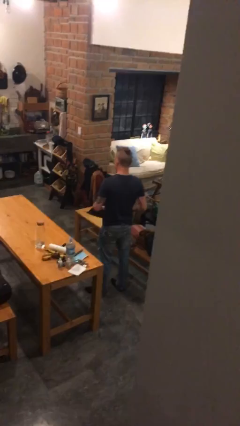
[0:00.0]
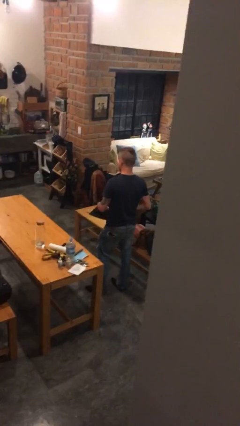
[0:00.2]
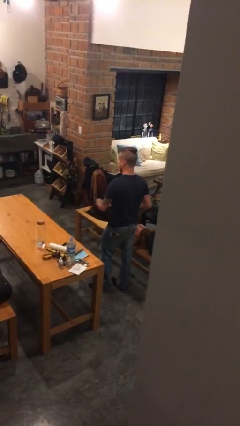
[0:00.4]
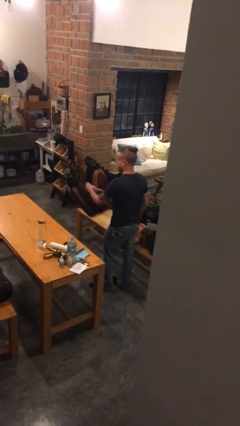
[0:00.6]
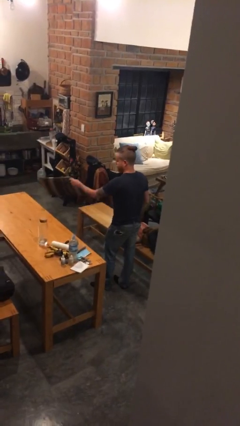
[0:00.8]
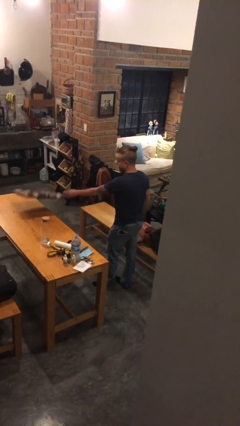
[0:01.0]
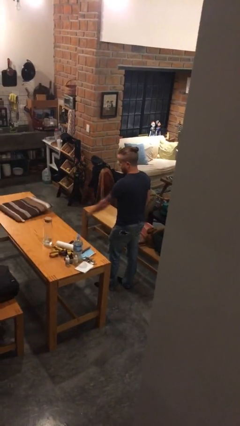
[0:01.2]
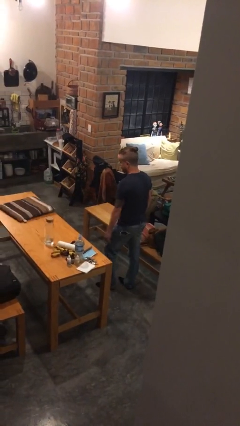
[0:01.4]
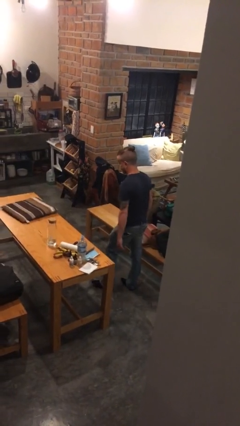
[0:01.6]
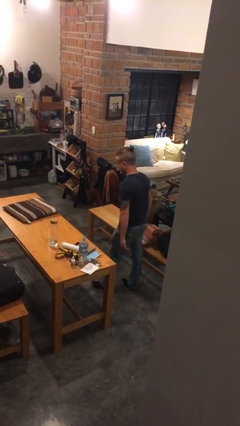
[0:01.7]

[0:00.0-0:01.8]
person throws object on table

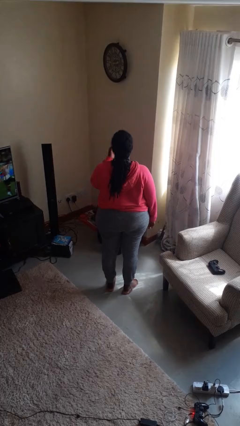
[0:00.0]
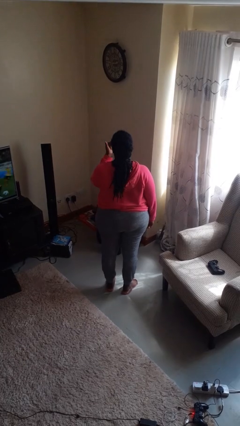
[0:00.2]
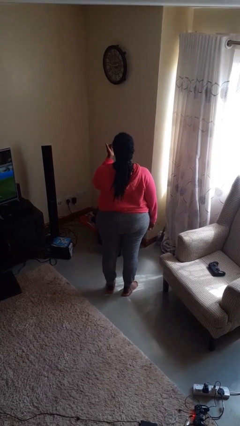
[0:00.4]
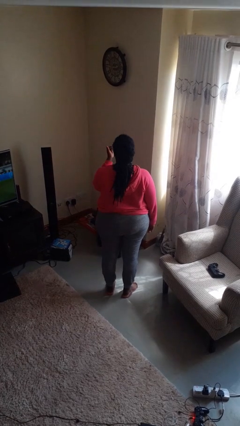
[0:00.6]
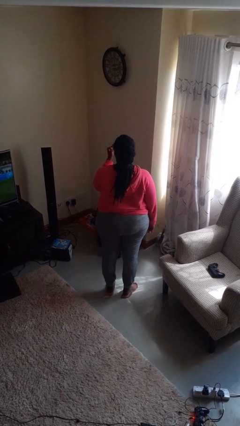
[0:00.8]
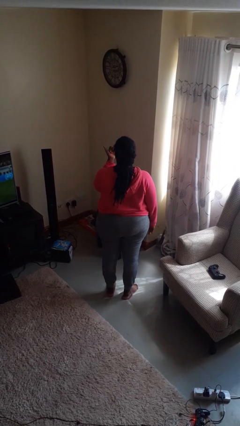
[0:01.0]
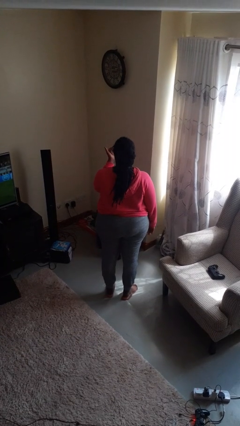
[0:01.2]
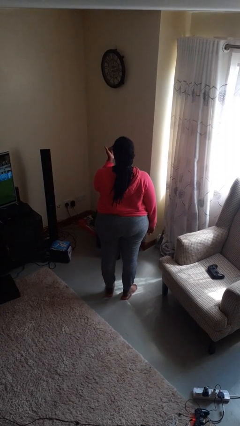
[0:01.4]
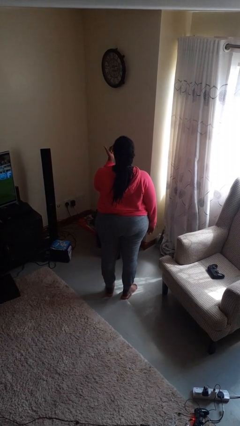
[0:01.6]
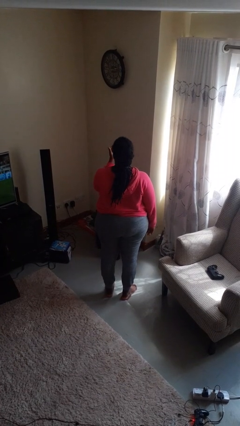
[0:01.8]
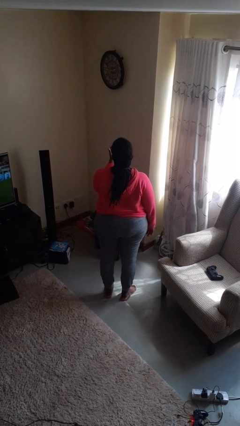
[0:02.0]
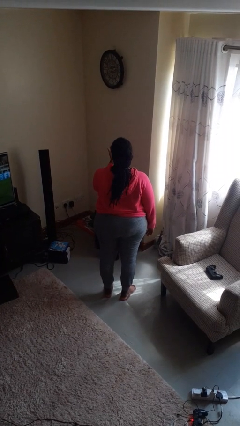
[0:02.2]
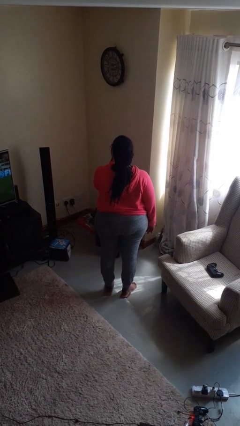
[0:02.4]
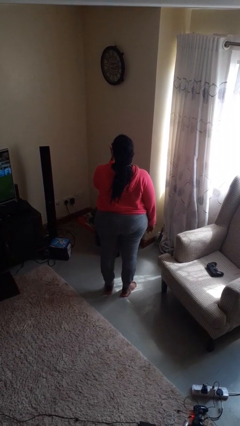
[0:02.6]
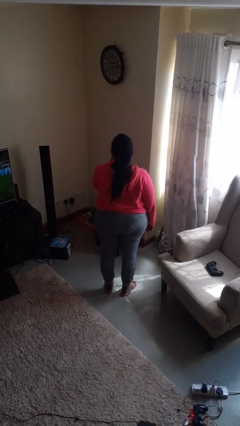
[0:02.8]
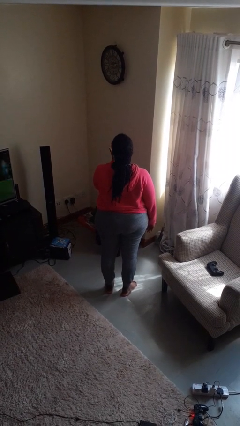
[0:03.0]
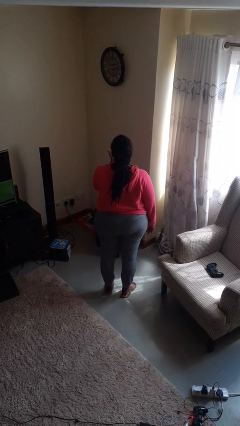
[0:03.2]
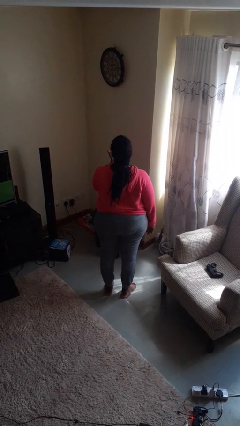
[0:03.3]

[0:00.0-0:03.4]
person gestures hang loose

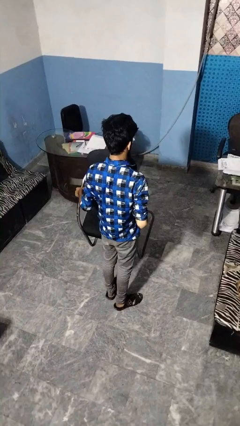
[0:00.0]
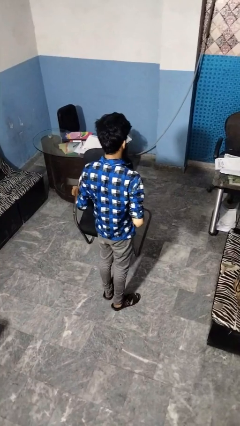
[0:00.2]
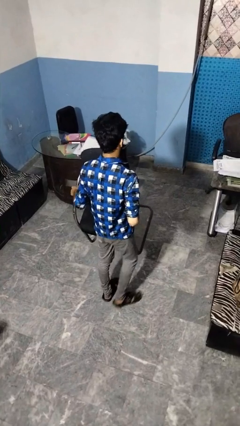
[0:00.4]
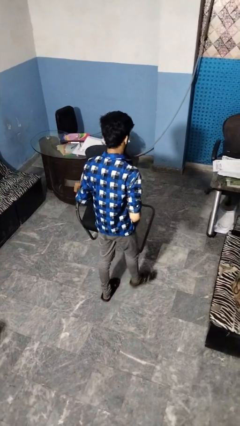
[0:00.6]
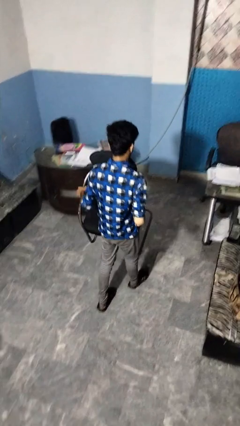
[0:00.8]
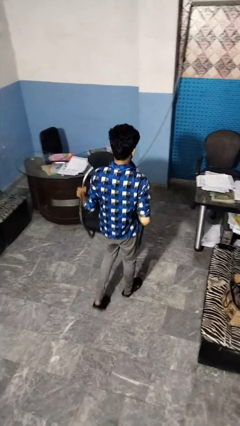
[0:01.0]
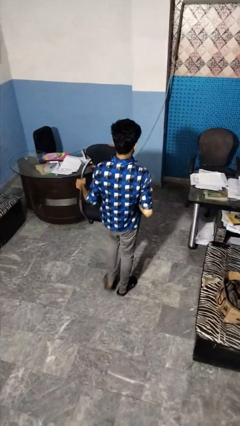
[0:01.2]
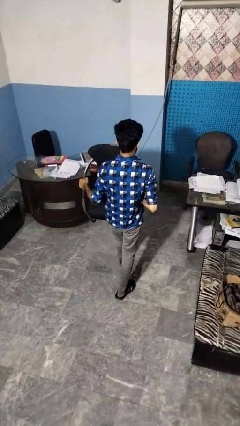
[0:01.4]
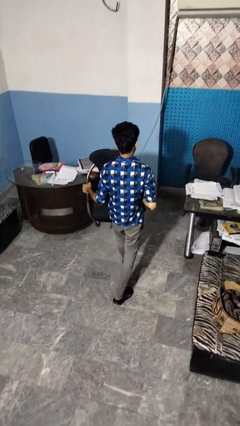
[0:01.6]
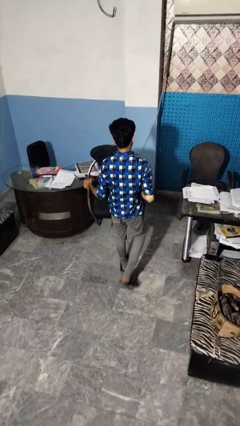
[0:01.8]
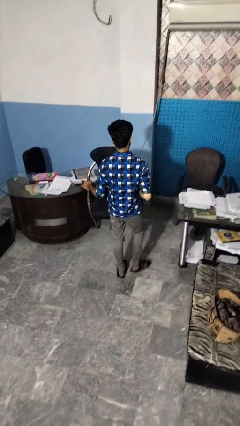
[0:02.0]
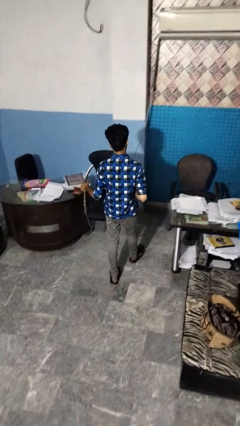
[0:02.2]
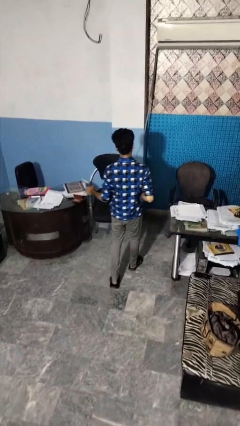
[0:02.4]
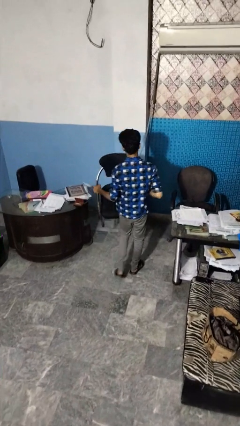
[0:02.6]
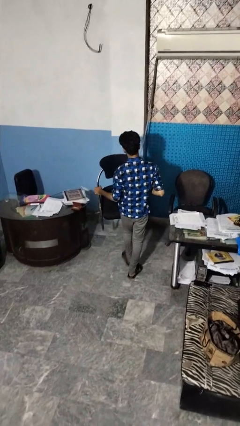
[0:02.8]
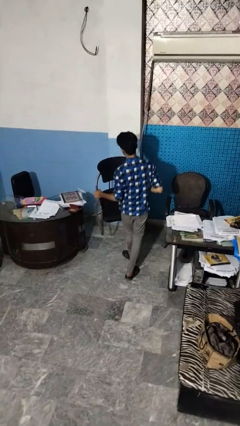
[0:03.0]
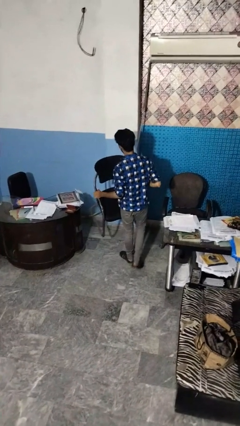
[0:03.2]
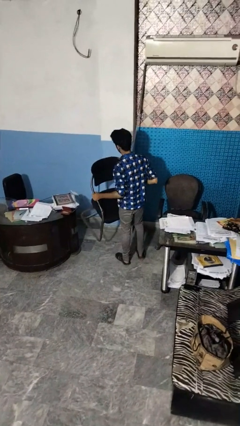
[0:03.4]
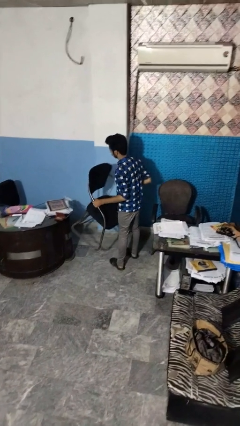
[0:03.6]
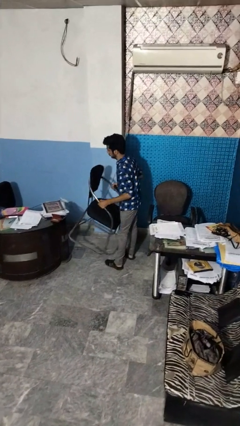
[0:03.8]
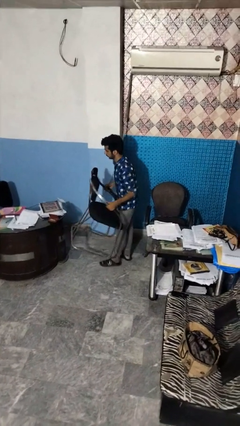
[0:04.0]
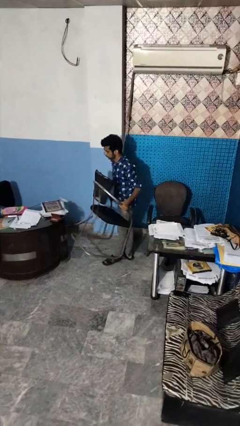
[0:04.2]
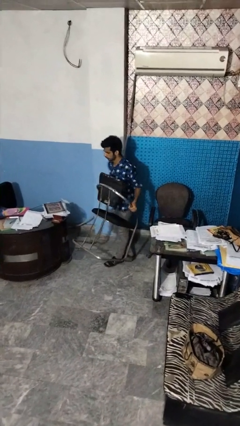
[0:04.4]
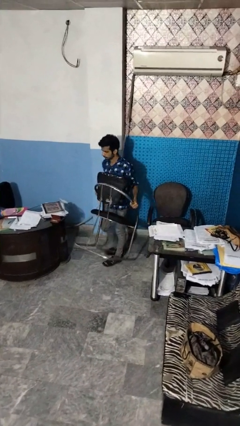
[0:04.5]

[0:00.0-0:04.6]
person carries furniture

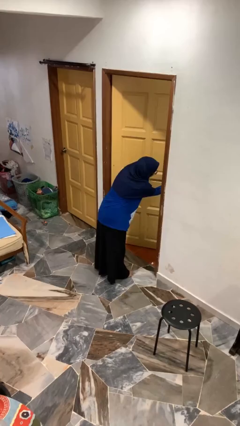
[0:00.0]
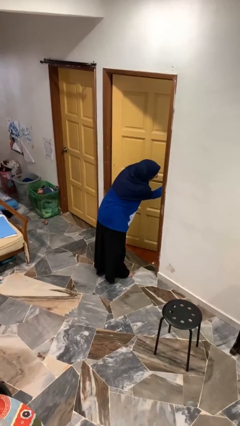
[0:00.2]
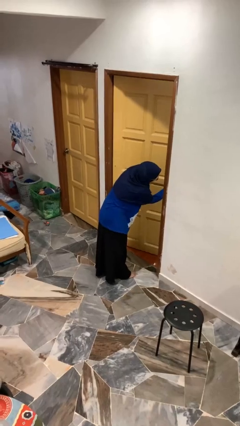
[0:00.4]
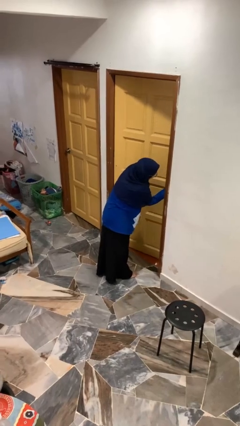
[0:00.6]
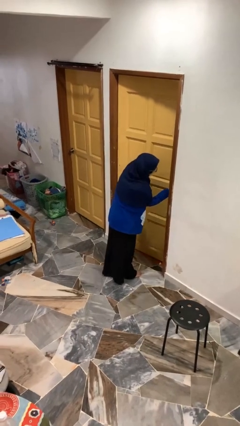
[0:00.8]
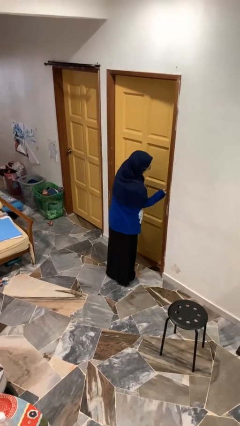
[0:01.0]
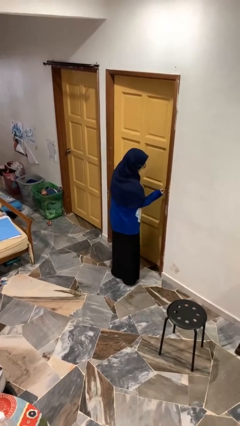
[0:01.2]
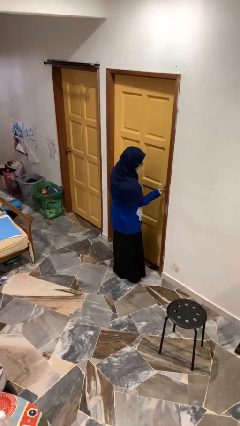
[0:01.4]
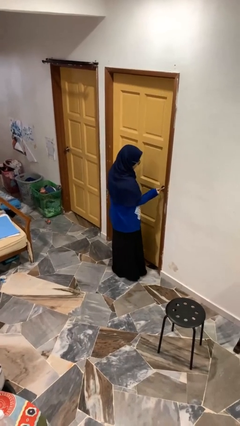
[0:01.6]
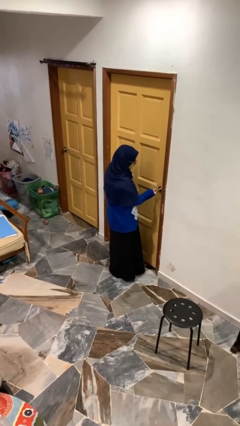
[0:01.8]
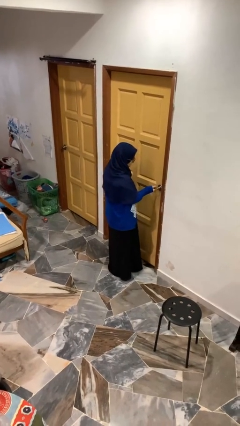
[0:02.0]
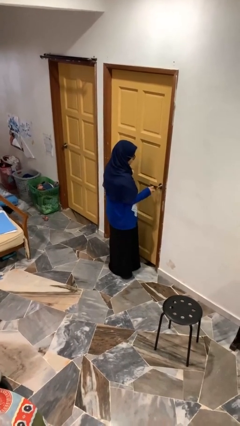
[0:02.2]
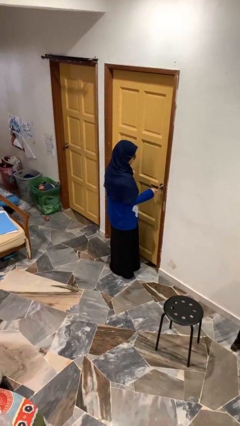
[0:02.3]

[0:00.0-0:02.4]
person closes facility door

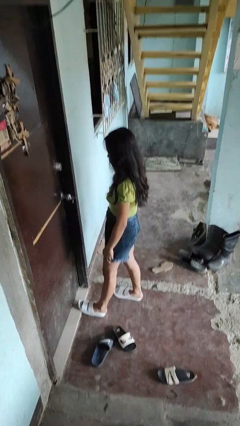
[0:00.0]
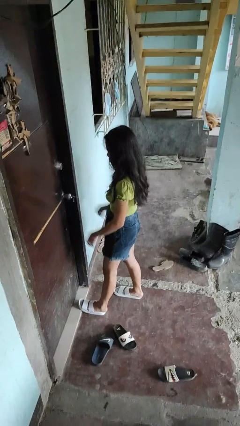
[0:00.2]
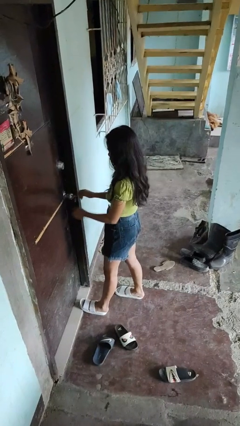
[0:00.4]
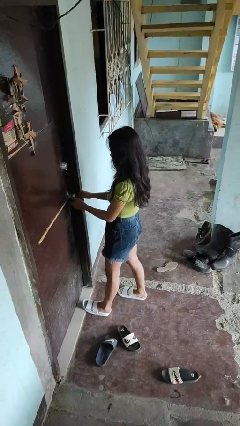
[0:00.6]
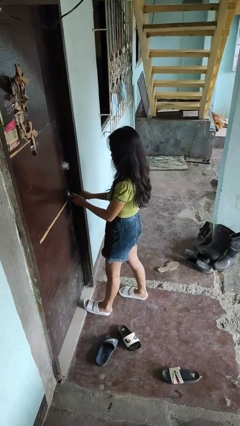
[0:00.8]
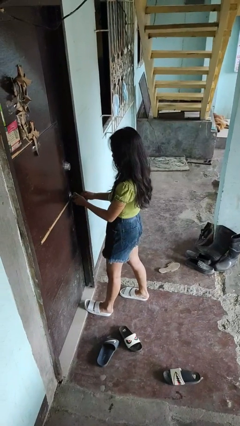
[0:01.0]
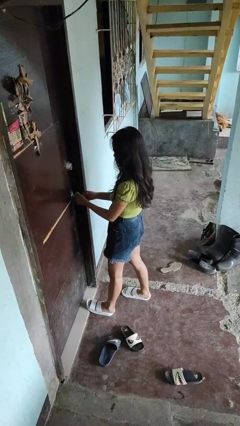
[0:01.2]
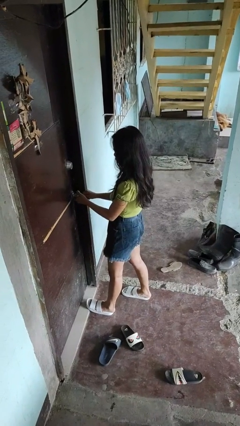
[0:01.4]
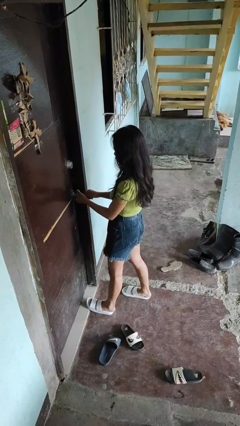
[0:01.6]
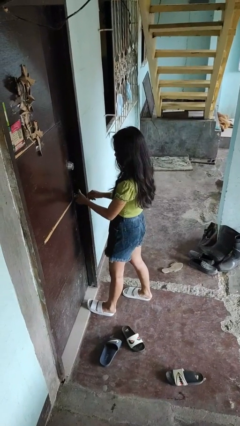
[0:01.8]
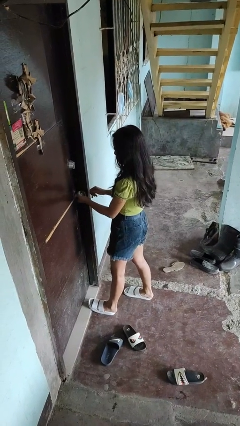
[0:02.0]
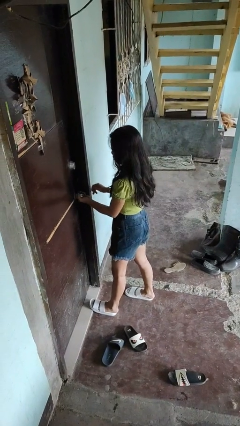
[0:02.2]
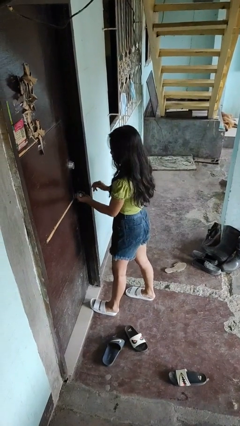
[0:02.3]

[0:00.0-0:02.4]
person unlocks door with keys

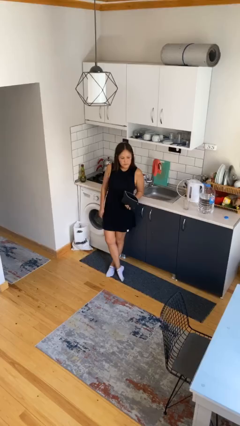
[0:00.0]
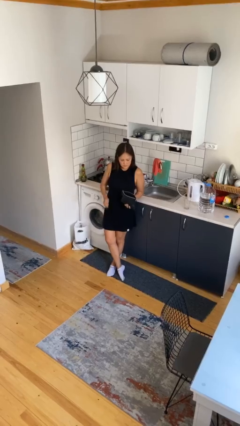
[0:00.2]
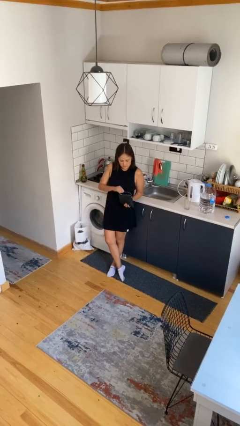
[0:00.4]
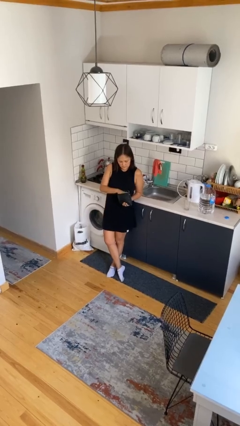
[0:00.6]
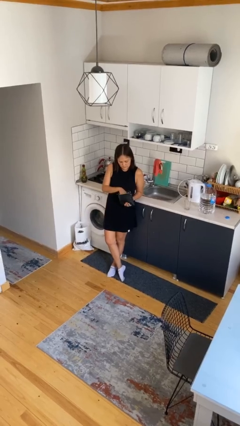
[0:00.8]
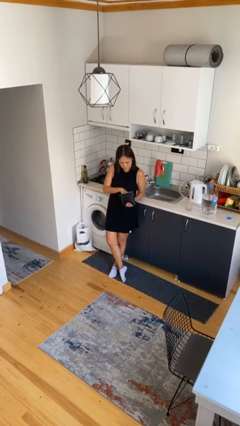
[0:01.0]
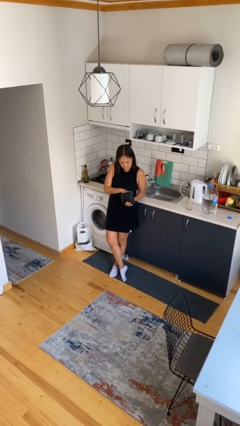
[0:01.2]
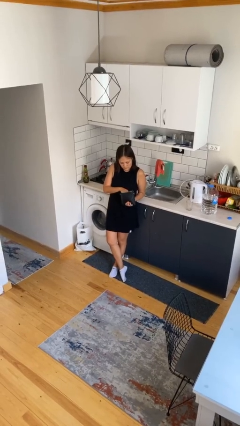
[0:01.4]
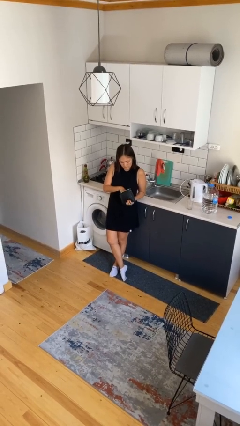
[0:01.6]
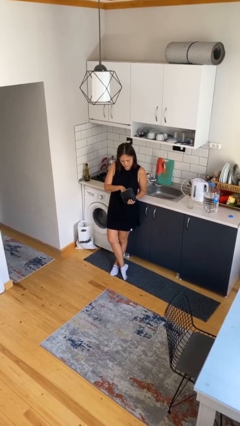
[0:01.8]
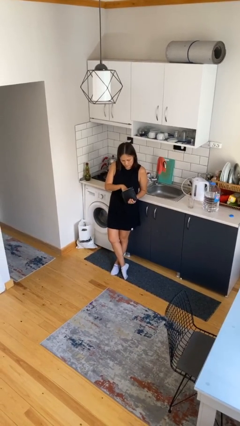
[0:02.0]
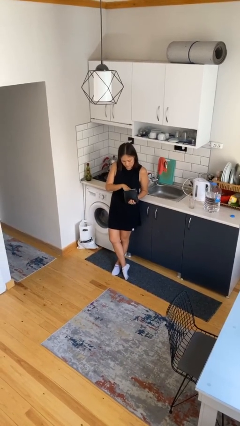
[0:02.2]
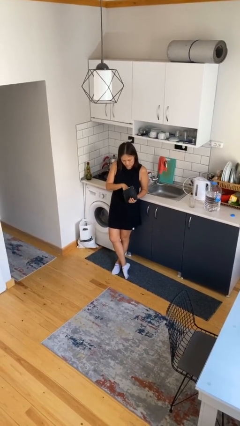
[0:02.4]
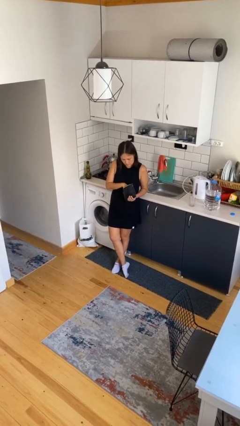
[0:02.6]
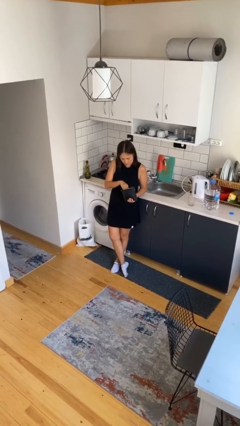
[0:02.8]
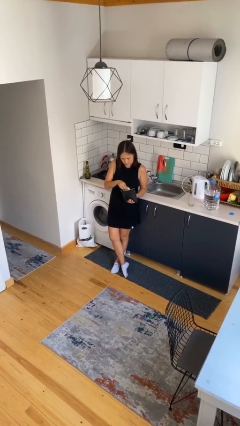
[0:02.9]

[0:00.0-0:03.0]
person searches in purse
